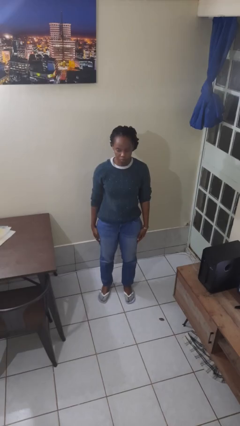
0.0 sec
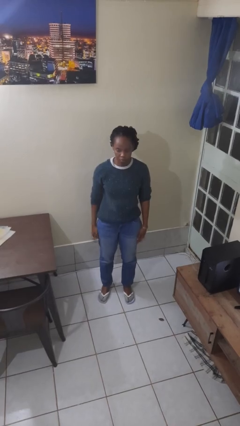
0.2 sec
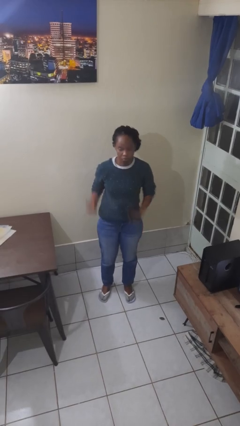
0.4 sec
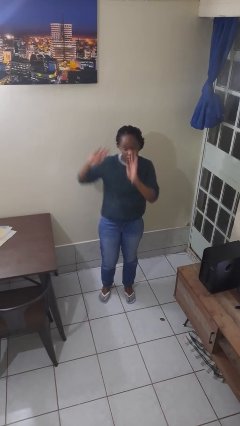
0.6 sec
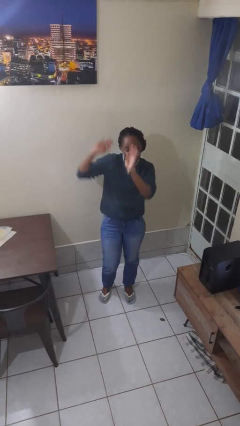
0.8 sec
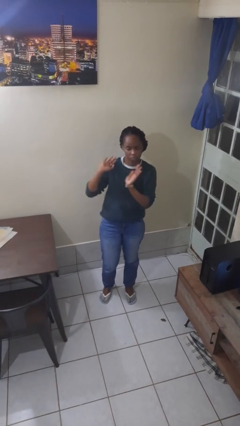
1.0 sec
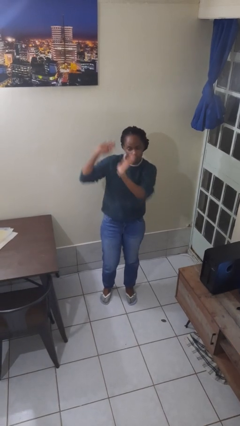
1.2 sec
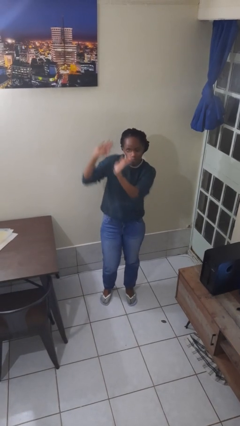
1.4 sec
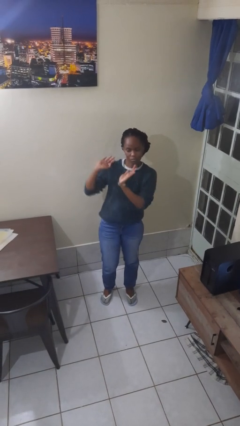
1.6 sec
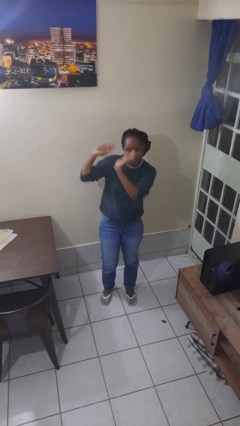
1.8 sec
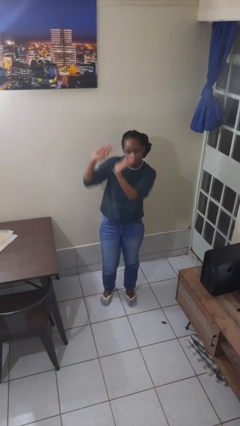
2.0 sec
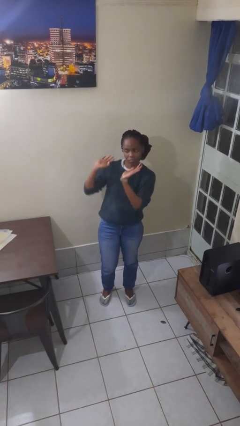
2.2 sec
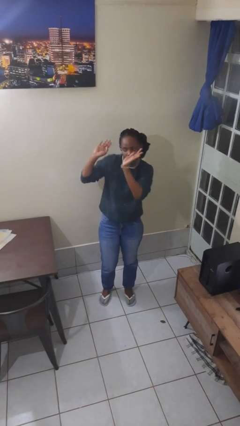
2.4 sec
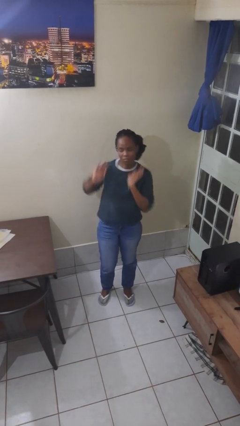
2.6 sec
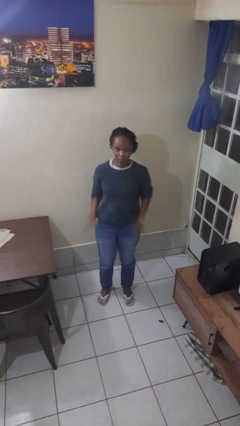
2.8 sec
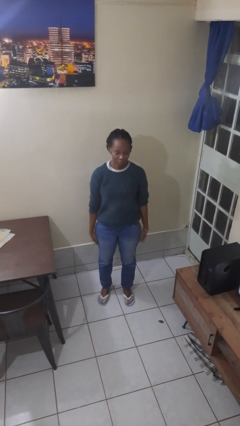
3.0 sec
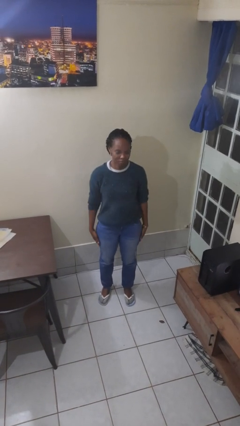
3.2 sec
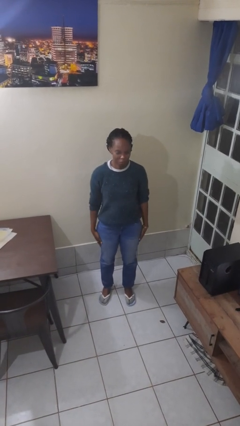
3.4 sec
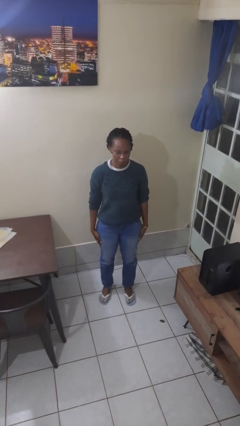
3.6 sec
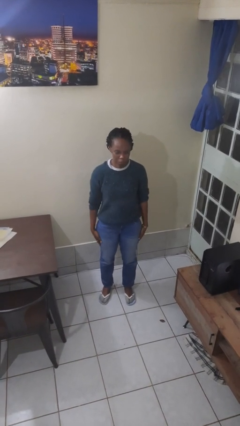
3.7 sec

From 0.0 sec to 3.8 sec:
person dances in place

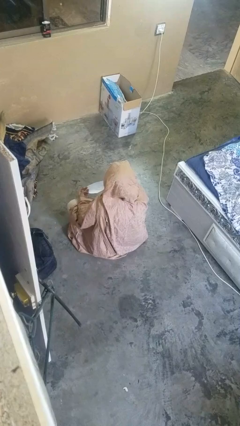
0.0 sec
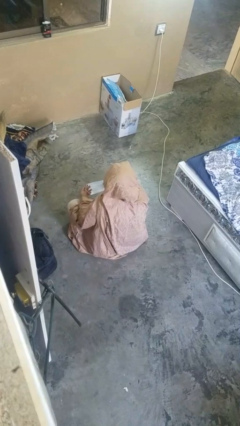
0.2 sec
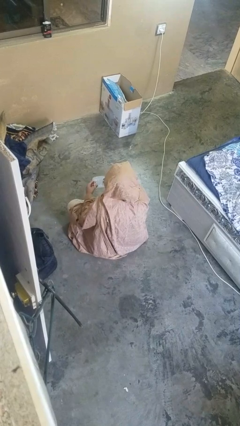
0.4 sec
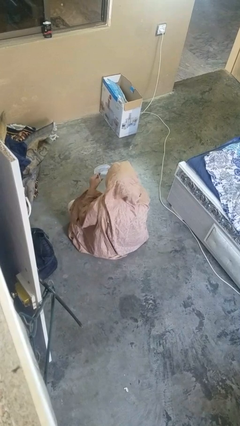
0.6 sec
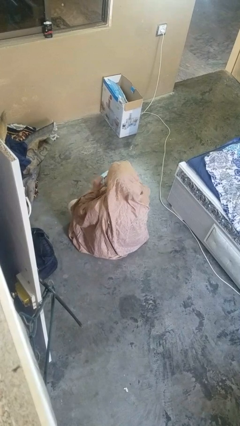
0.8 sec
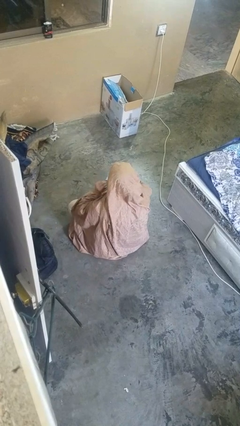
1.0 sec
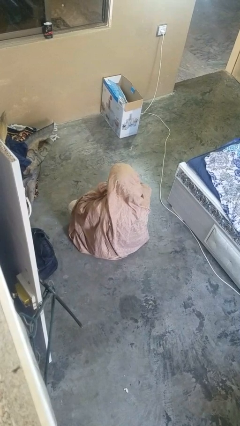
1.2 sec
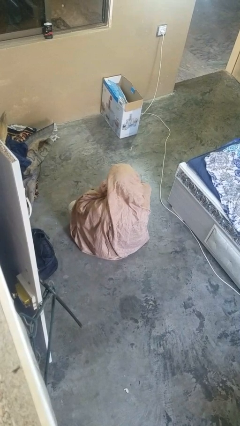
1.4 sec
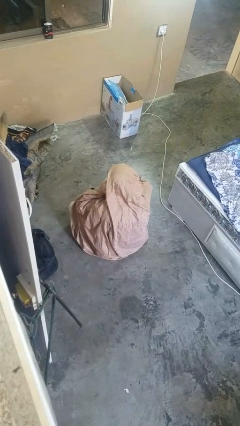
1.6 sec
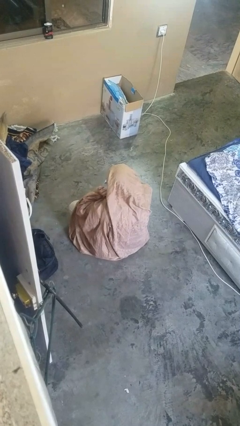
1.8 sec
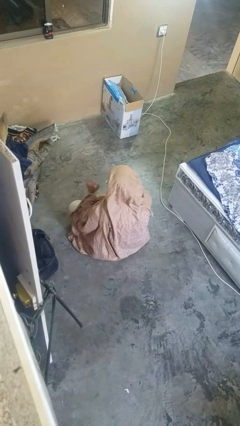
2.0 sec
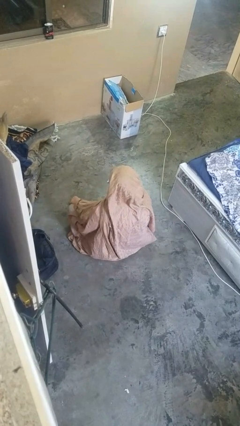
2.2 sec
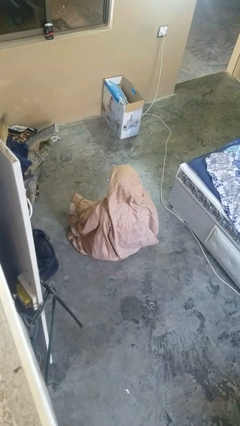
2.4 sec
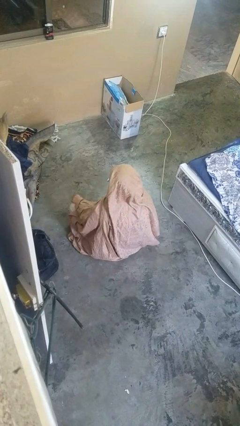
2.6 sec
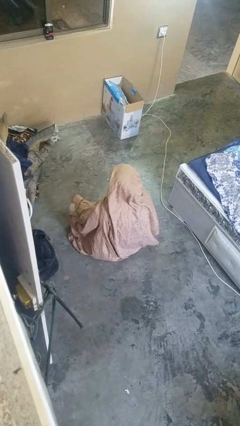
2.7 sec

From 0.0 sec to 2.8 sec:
person puts on facemask

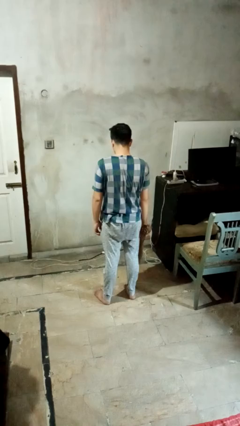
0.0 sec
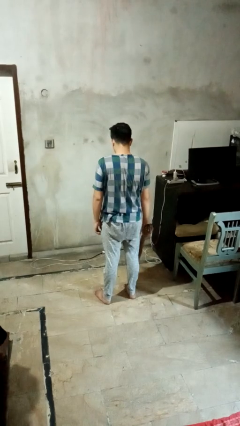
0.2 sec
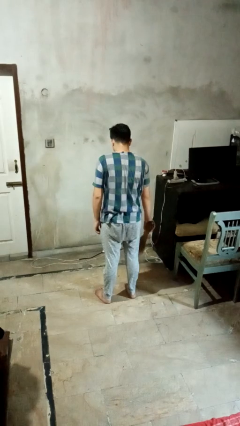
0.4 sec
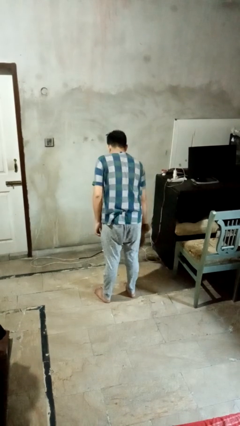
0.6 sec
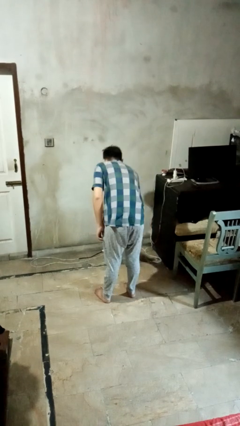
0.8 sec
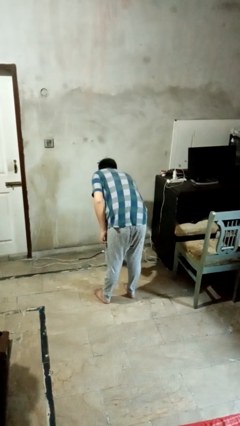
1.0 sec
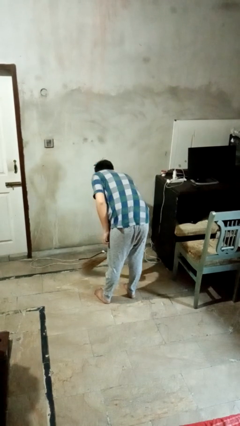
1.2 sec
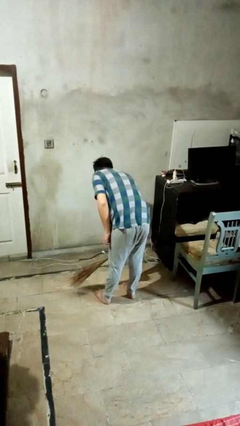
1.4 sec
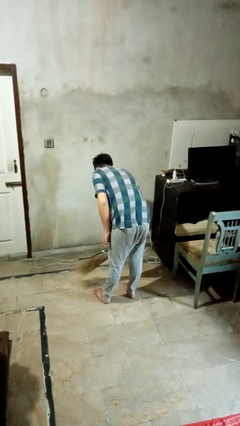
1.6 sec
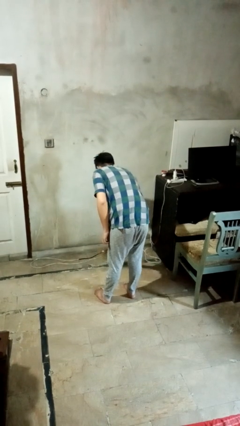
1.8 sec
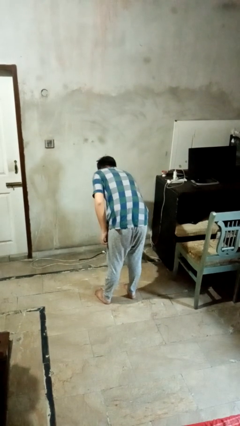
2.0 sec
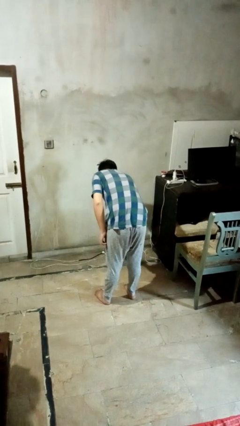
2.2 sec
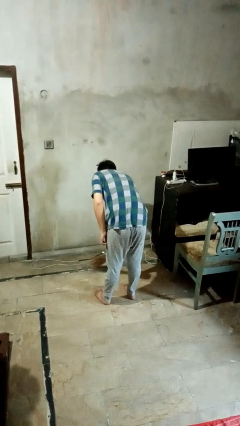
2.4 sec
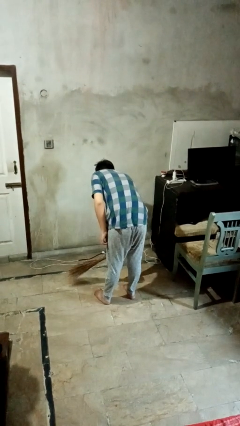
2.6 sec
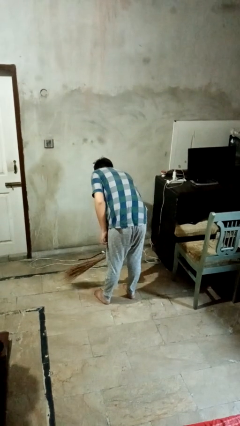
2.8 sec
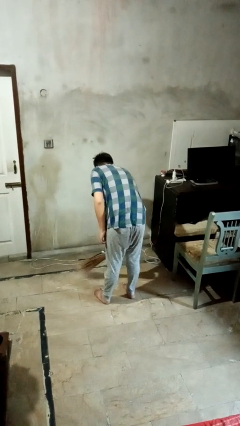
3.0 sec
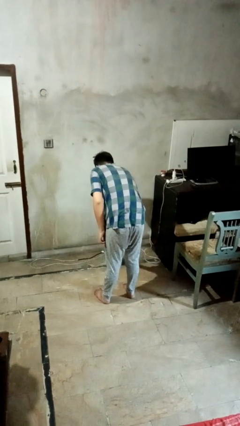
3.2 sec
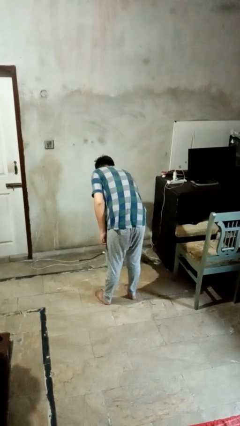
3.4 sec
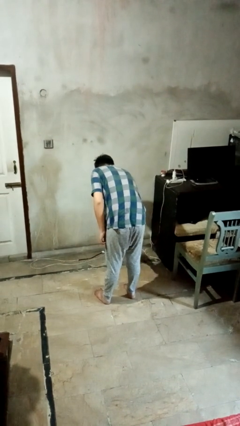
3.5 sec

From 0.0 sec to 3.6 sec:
person sweeps floor

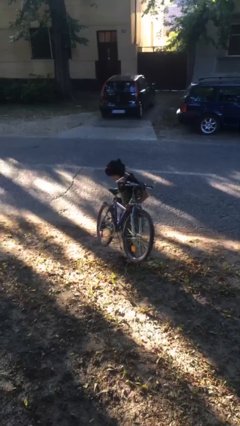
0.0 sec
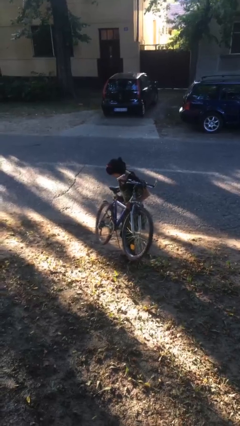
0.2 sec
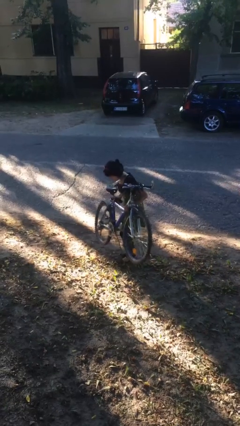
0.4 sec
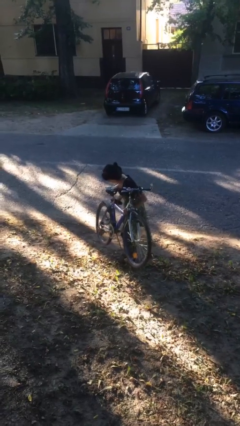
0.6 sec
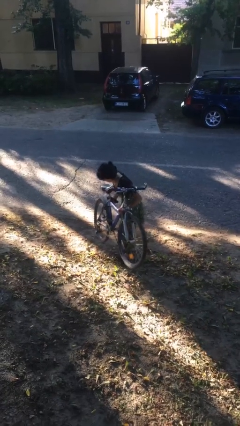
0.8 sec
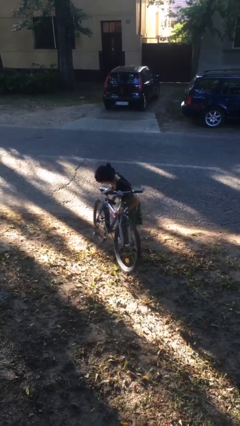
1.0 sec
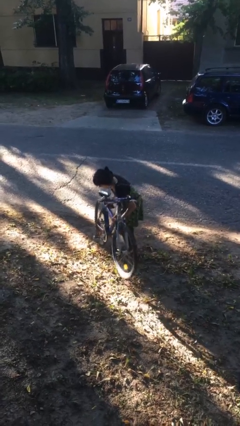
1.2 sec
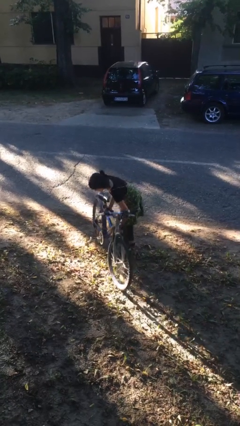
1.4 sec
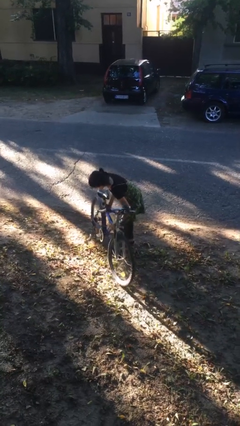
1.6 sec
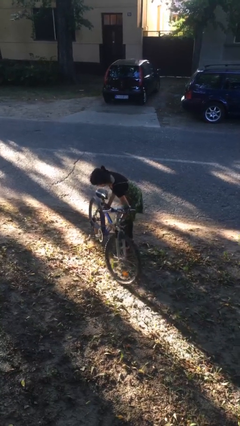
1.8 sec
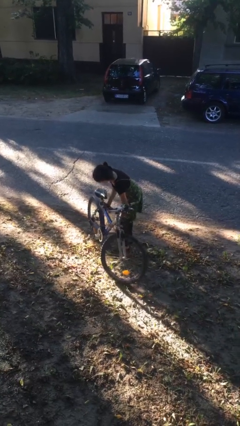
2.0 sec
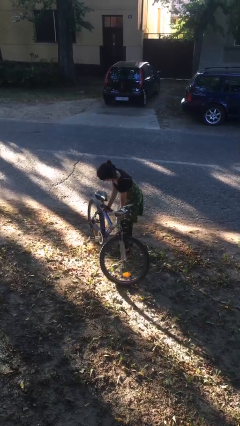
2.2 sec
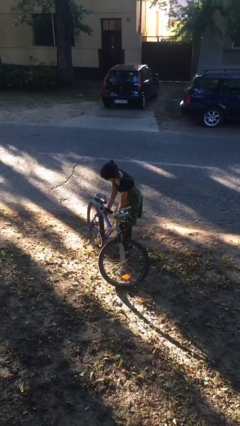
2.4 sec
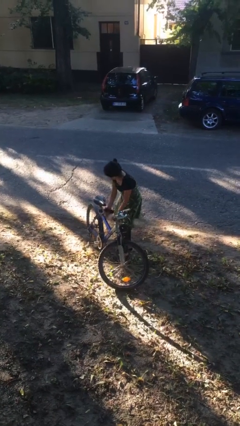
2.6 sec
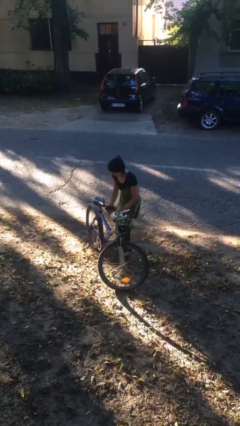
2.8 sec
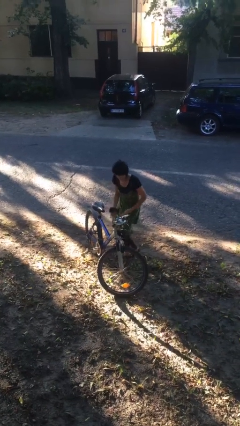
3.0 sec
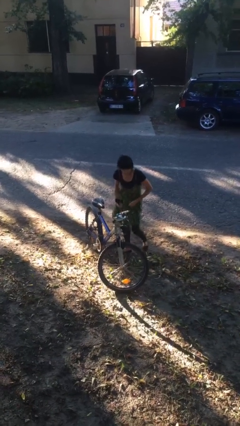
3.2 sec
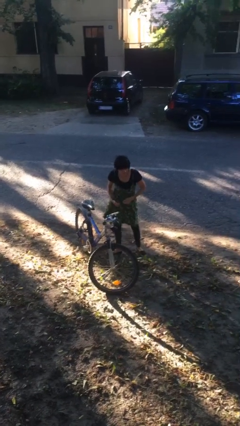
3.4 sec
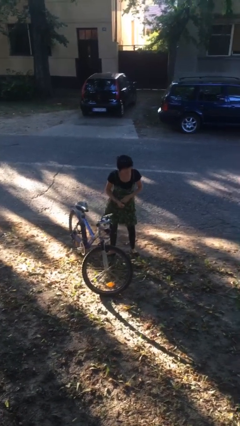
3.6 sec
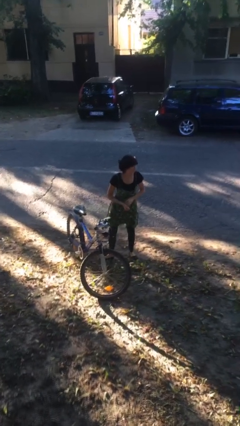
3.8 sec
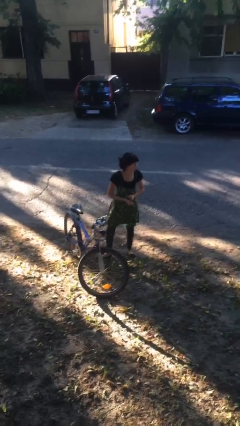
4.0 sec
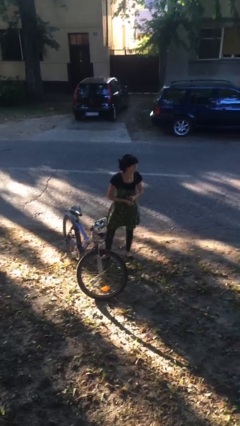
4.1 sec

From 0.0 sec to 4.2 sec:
person puts down object on floor

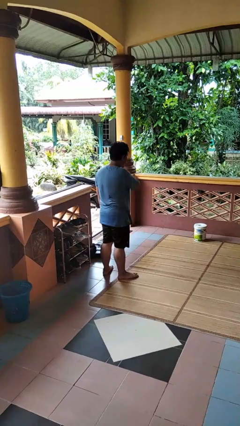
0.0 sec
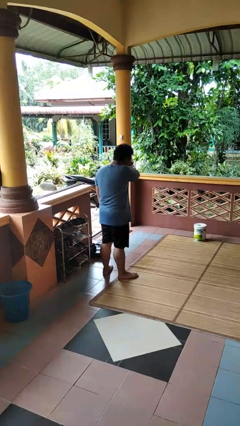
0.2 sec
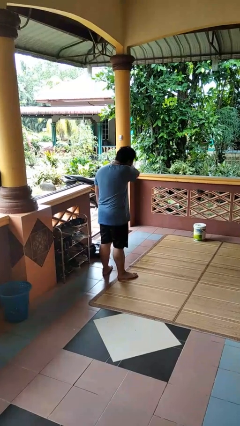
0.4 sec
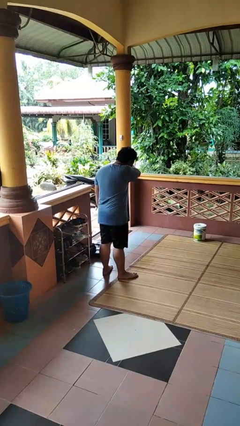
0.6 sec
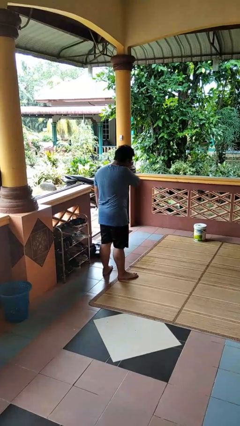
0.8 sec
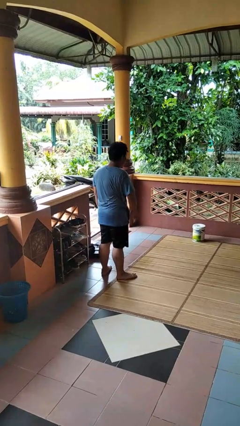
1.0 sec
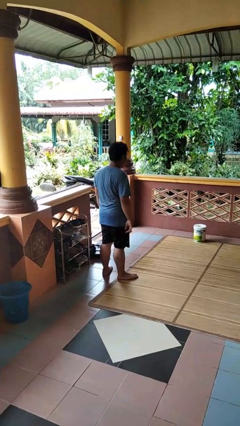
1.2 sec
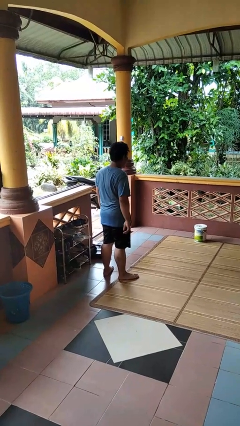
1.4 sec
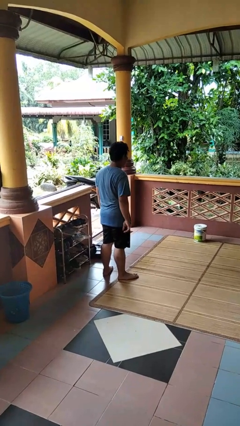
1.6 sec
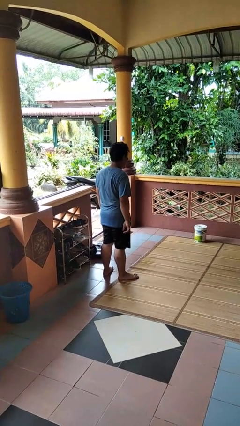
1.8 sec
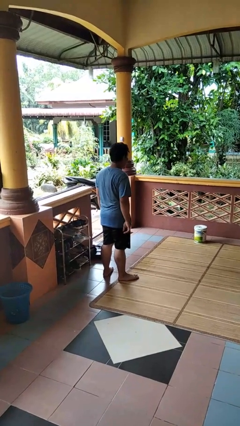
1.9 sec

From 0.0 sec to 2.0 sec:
person sneezes into hand

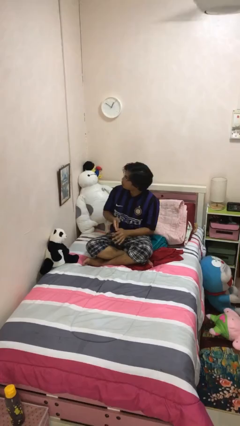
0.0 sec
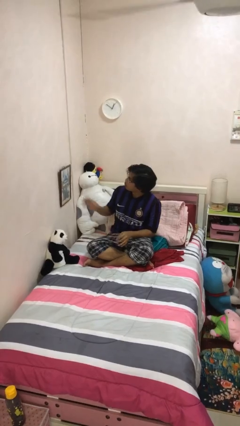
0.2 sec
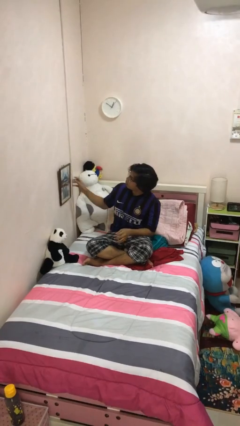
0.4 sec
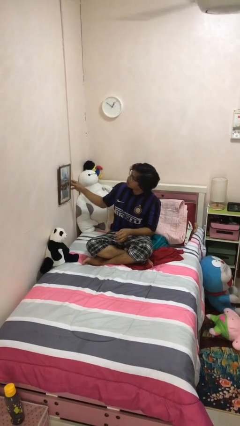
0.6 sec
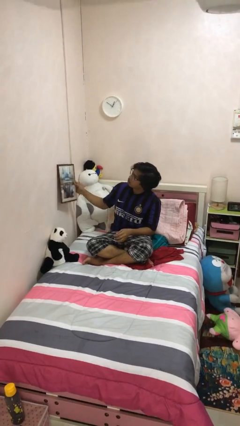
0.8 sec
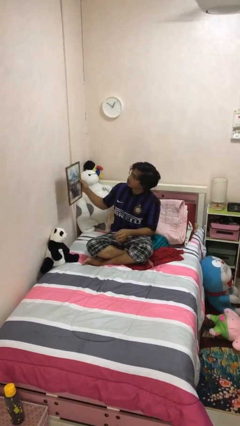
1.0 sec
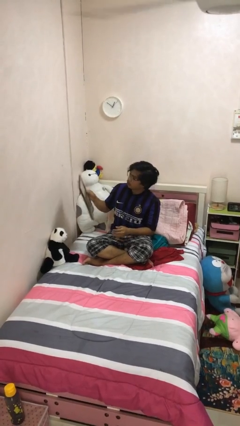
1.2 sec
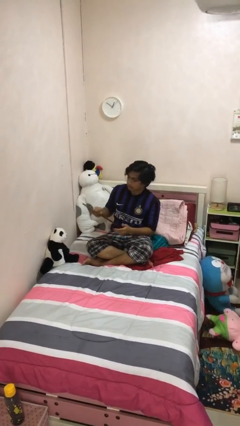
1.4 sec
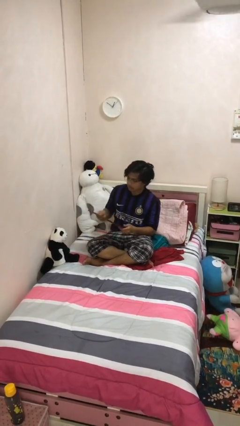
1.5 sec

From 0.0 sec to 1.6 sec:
person takes down picture frame
